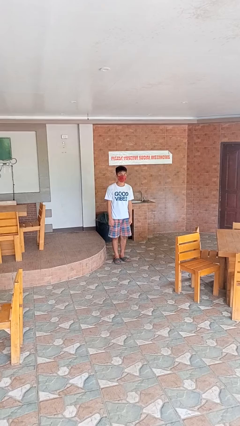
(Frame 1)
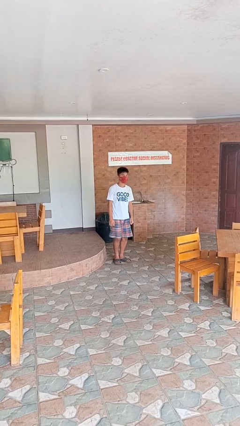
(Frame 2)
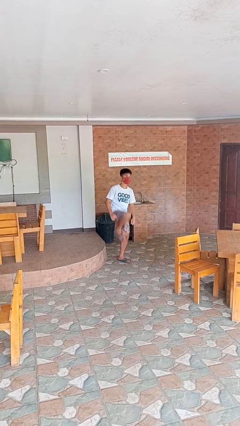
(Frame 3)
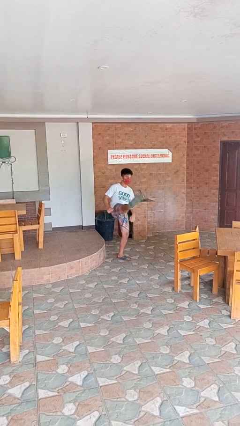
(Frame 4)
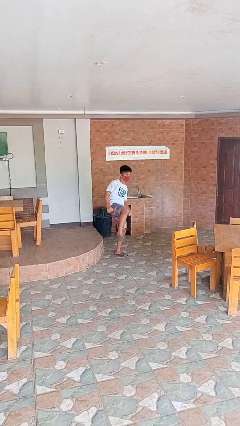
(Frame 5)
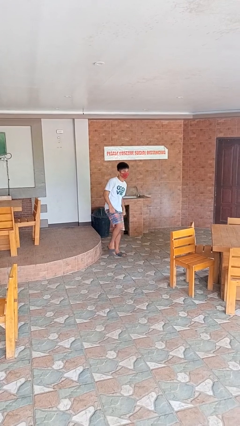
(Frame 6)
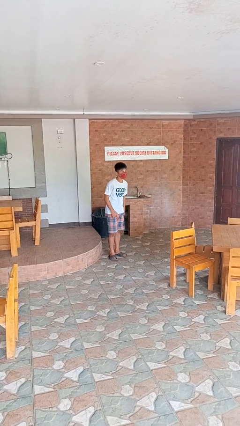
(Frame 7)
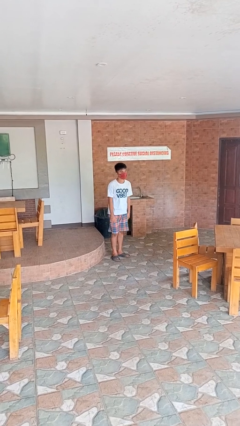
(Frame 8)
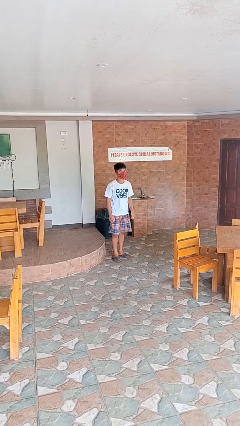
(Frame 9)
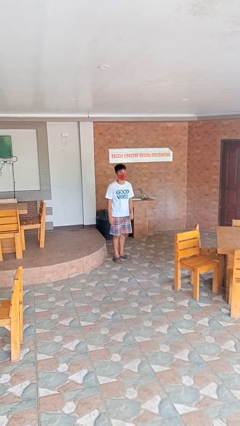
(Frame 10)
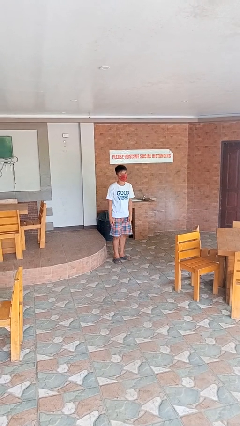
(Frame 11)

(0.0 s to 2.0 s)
person karate kicks

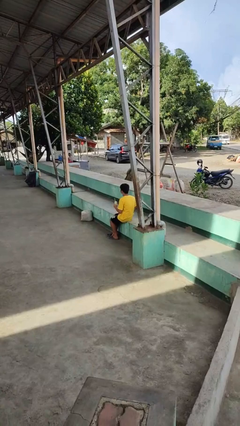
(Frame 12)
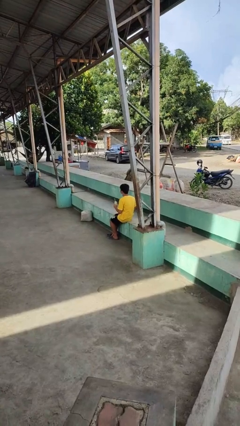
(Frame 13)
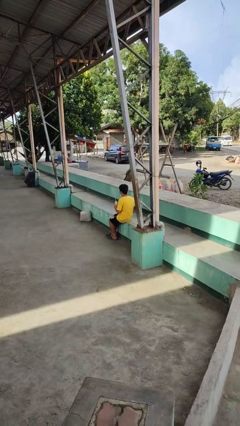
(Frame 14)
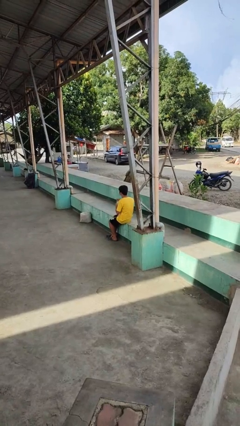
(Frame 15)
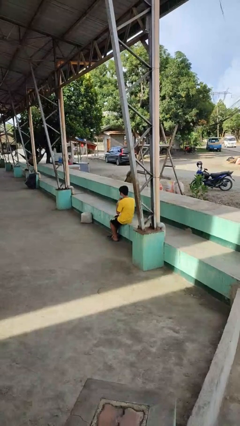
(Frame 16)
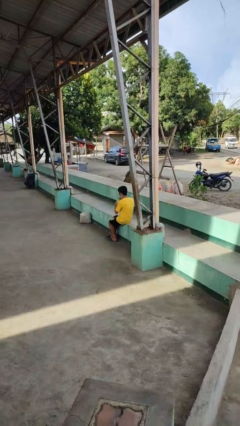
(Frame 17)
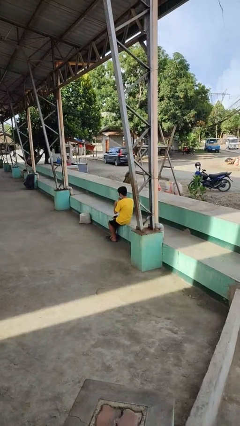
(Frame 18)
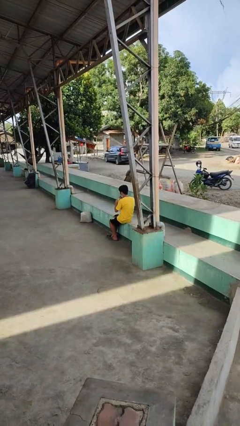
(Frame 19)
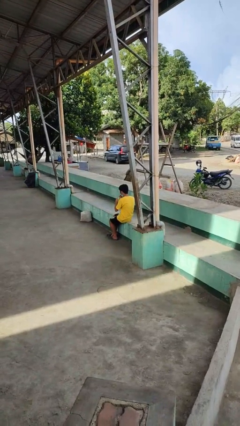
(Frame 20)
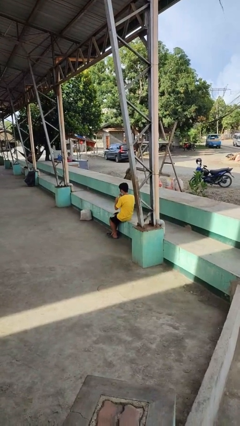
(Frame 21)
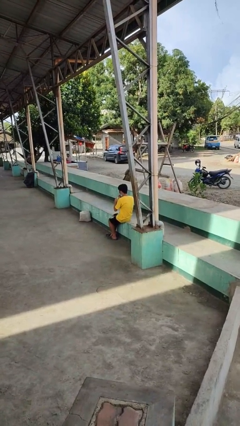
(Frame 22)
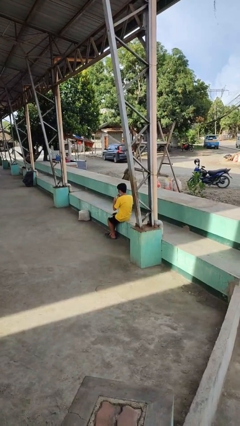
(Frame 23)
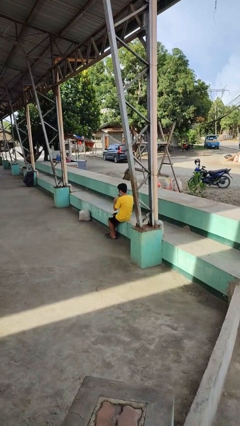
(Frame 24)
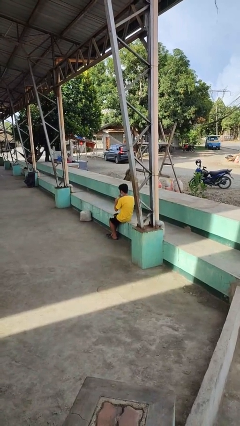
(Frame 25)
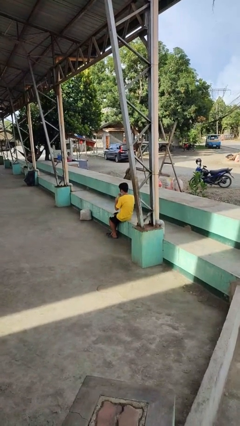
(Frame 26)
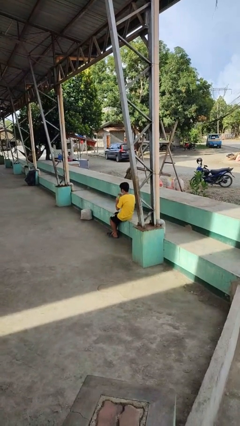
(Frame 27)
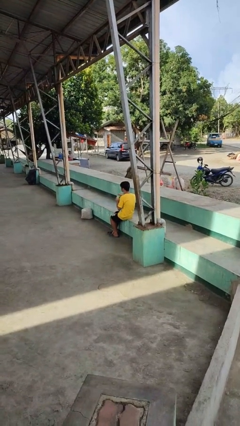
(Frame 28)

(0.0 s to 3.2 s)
person drinks from straw

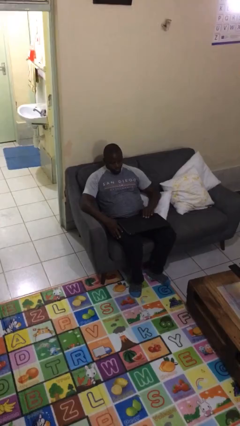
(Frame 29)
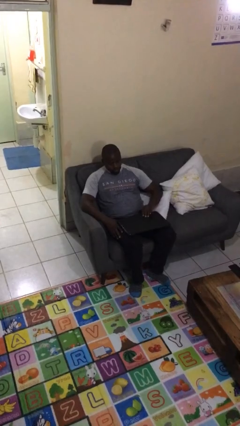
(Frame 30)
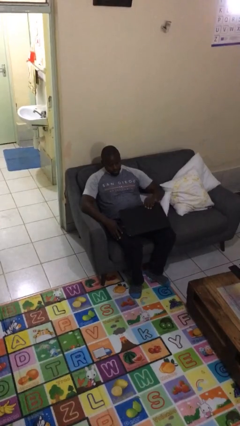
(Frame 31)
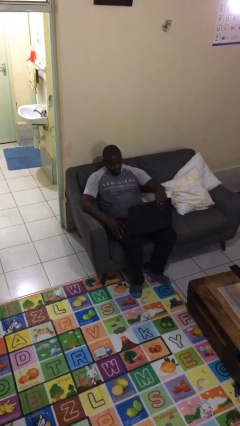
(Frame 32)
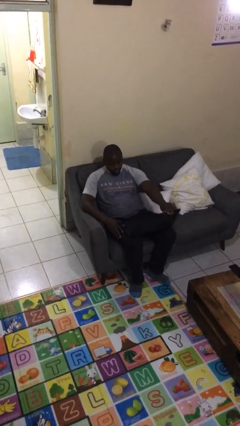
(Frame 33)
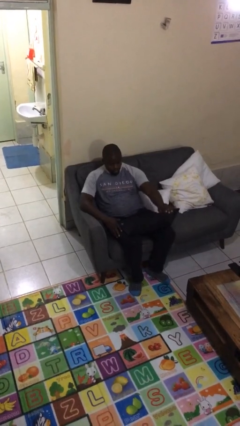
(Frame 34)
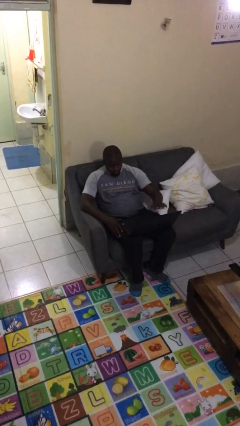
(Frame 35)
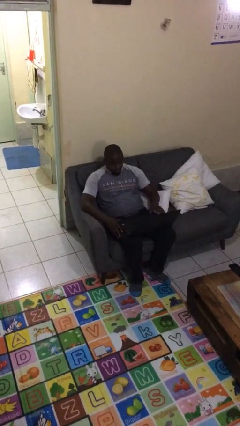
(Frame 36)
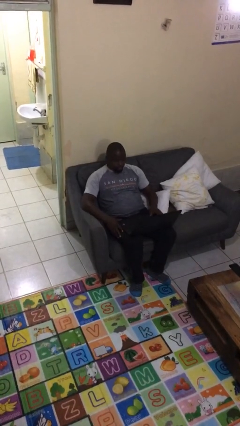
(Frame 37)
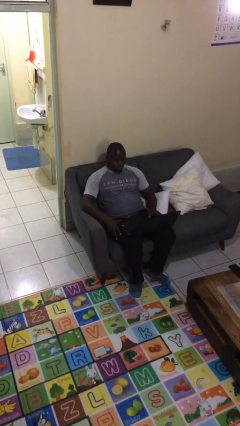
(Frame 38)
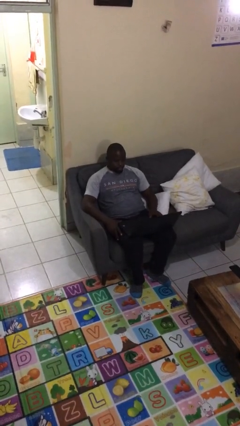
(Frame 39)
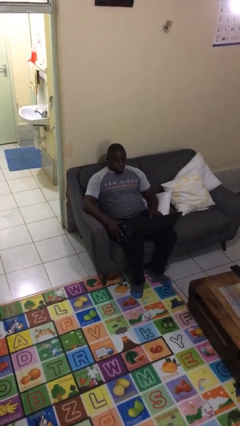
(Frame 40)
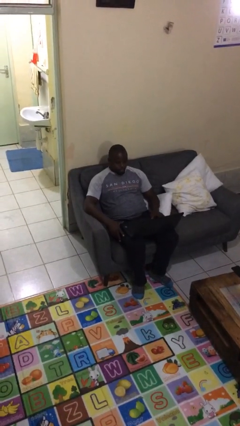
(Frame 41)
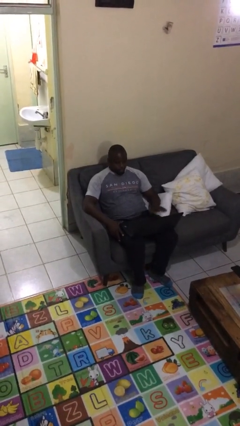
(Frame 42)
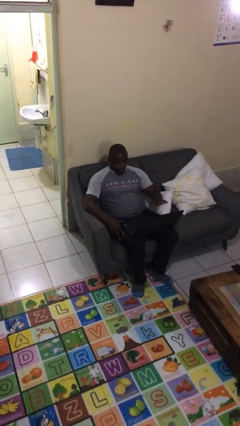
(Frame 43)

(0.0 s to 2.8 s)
person opens laptop

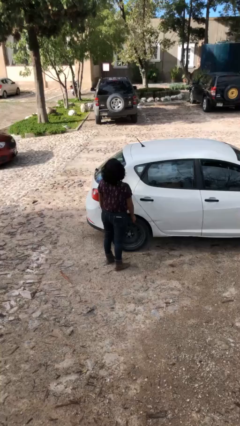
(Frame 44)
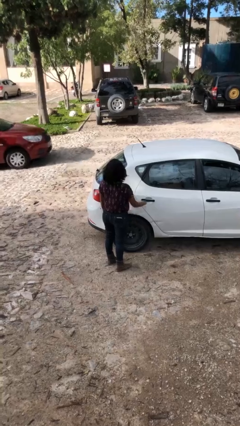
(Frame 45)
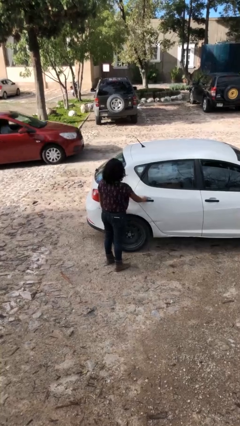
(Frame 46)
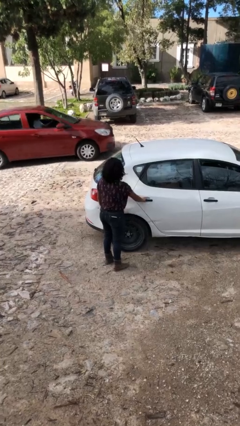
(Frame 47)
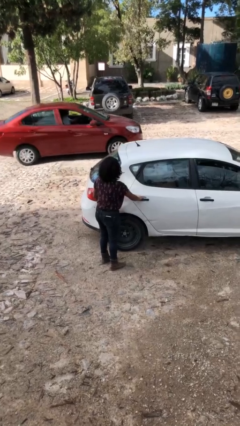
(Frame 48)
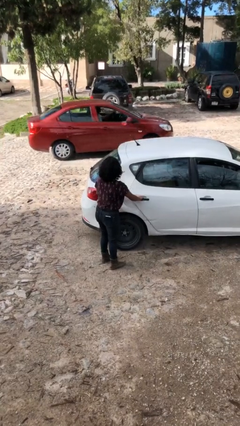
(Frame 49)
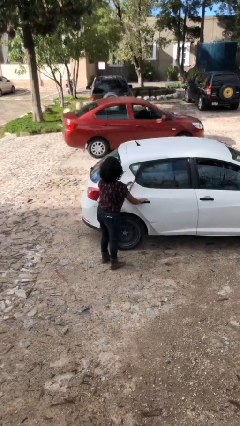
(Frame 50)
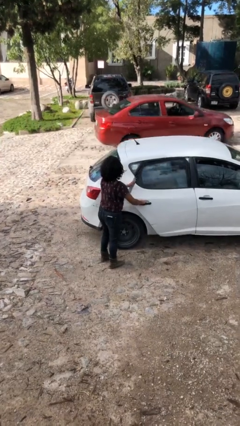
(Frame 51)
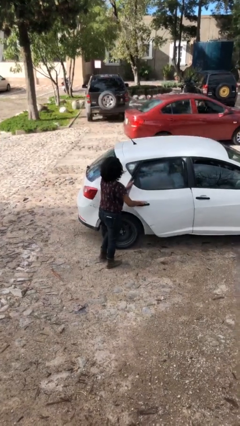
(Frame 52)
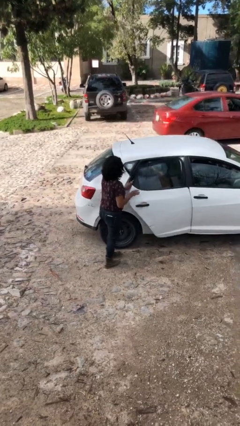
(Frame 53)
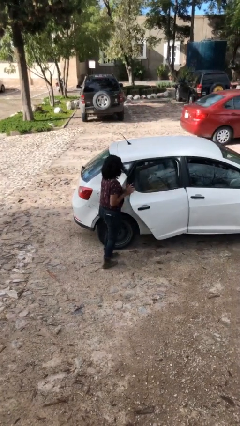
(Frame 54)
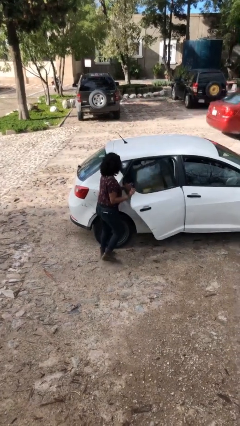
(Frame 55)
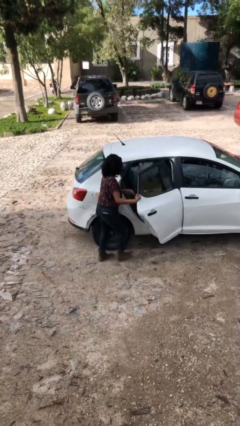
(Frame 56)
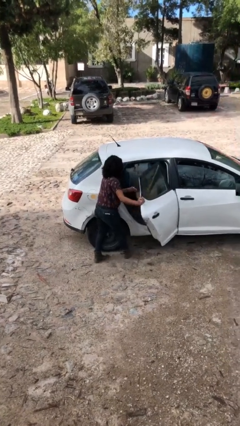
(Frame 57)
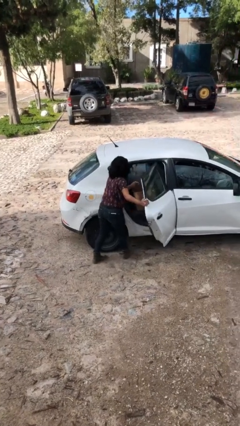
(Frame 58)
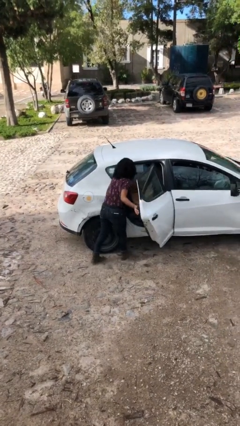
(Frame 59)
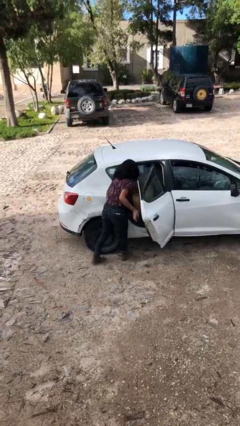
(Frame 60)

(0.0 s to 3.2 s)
person opens car door

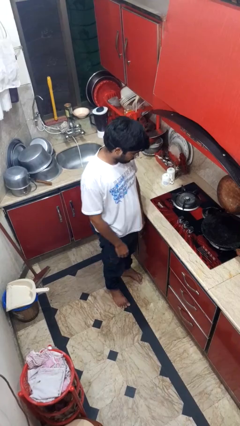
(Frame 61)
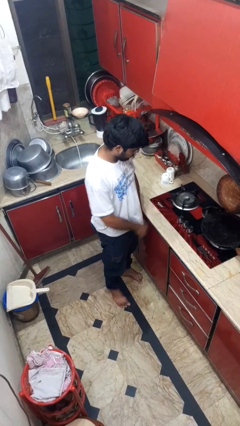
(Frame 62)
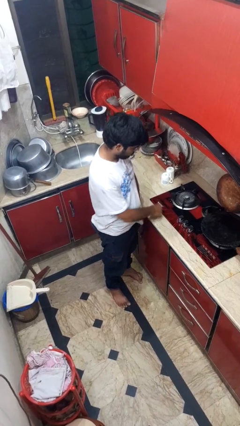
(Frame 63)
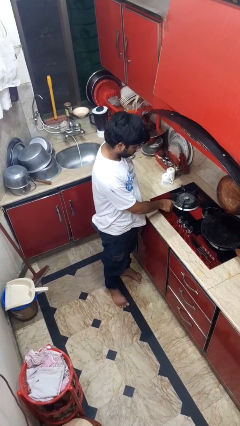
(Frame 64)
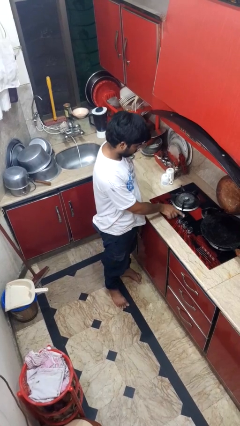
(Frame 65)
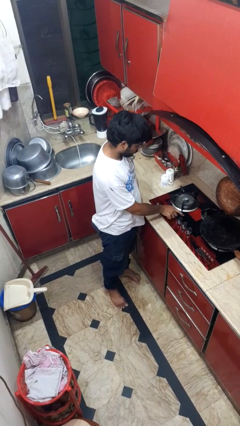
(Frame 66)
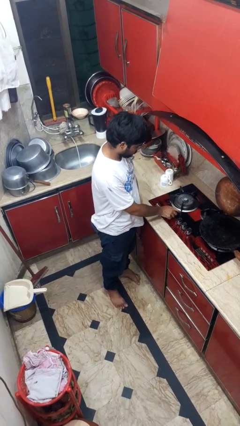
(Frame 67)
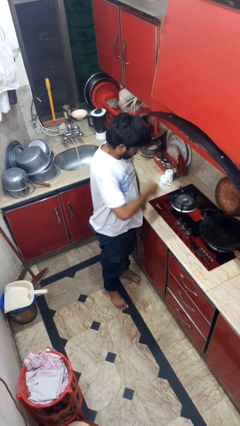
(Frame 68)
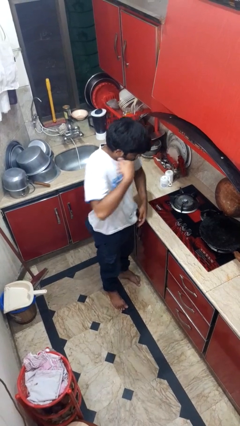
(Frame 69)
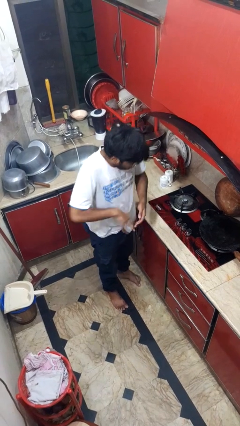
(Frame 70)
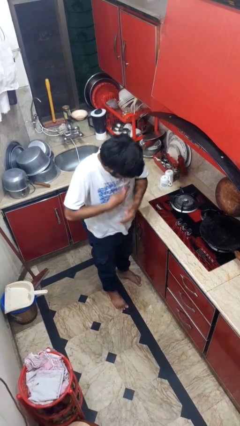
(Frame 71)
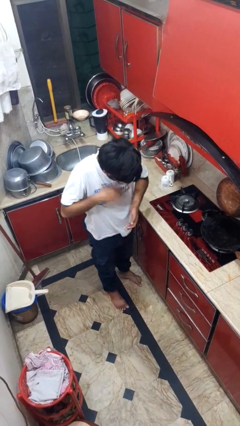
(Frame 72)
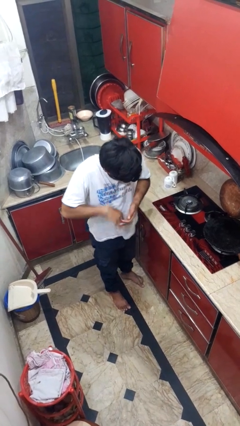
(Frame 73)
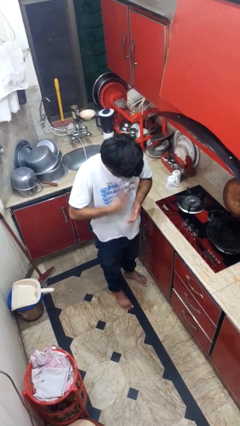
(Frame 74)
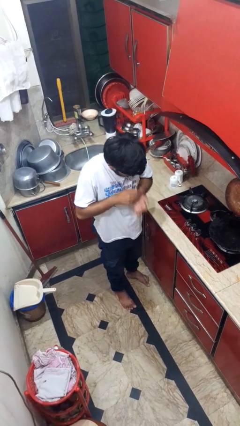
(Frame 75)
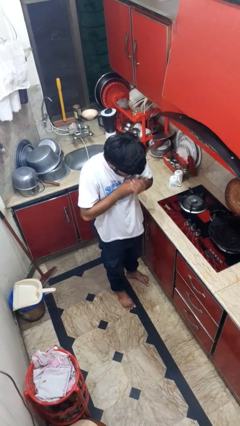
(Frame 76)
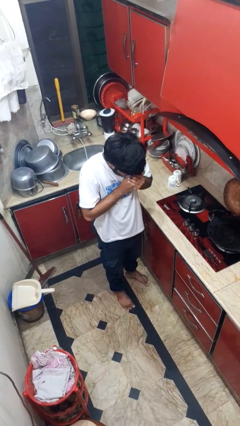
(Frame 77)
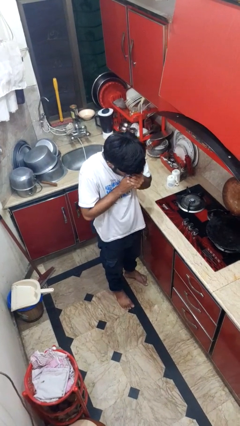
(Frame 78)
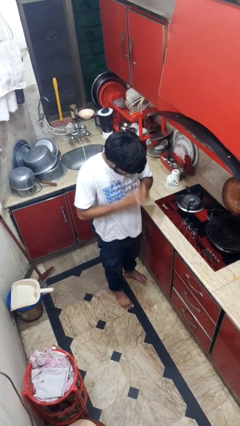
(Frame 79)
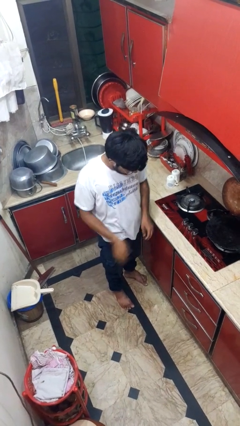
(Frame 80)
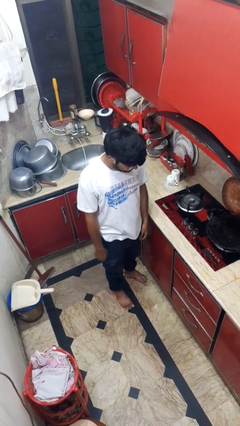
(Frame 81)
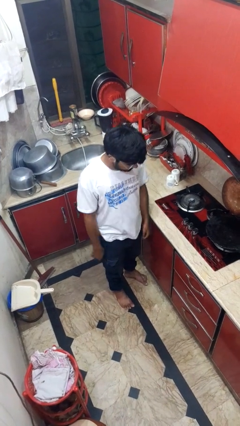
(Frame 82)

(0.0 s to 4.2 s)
person burns hand

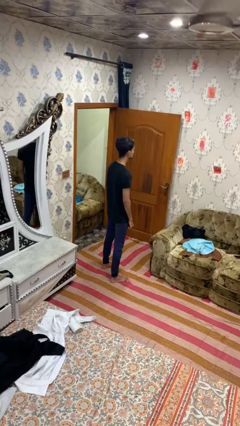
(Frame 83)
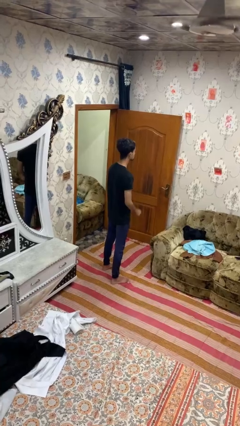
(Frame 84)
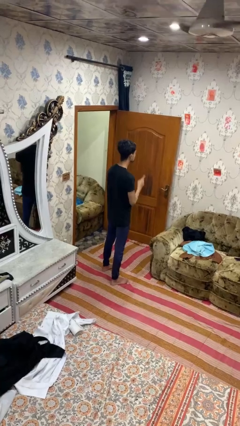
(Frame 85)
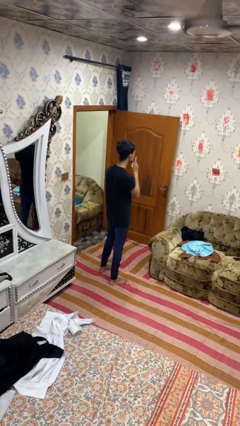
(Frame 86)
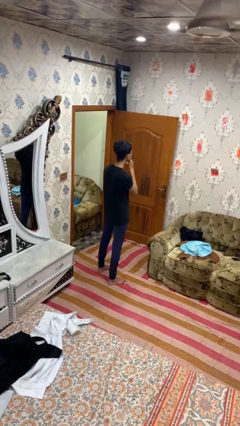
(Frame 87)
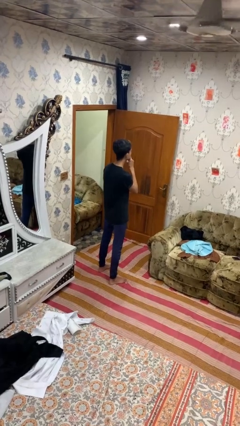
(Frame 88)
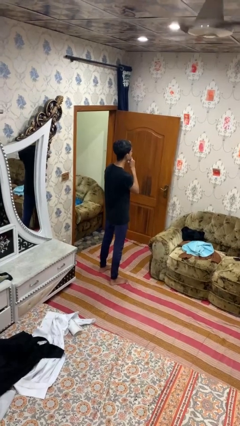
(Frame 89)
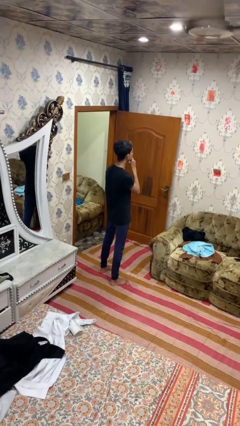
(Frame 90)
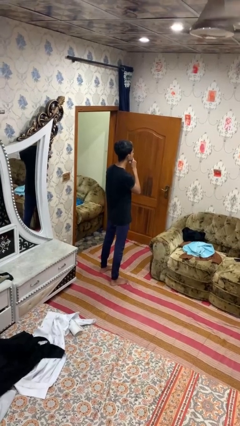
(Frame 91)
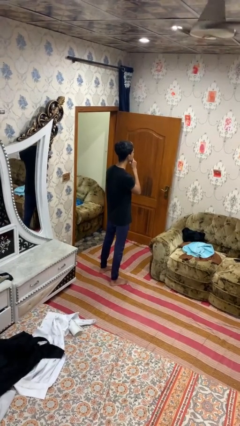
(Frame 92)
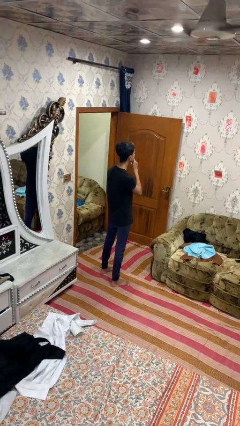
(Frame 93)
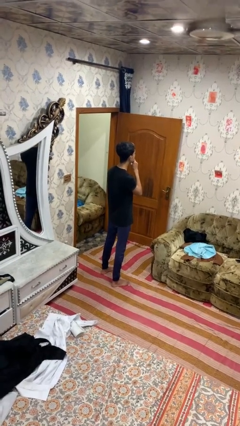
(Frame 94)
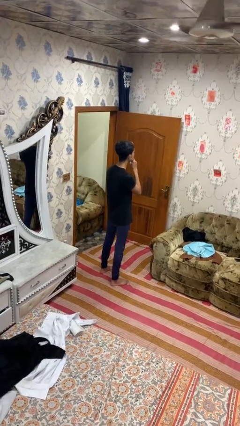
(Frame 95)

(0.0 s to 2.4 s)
person gestures be quiet
